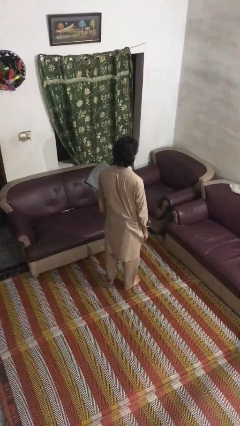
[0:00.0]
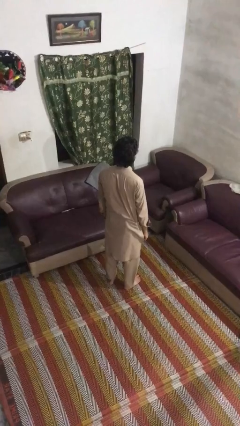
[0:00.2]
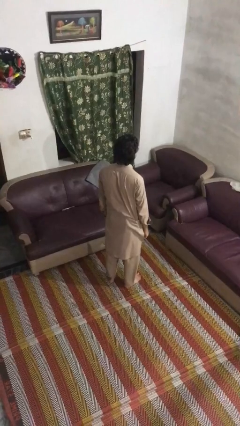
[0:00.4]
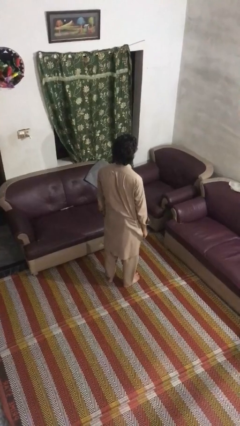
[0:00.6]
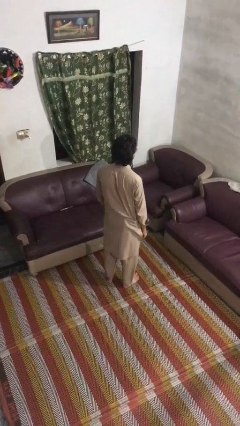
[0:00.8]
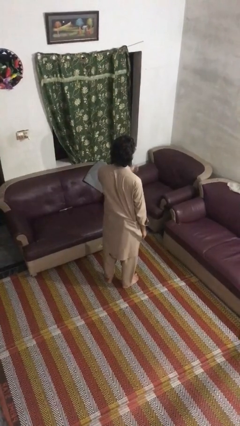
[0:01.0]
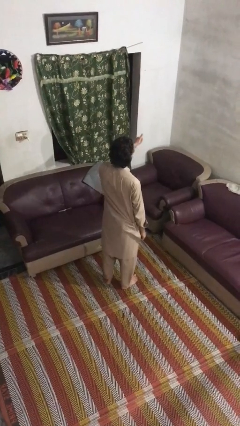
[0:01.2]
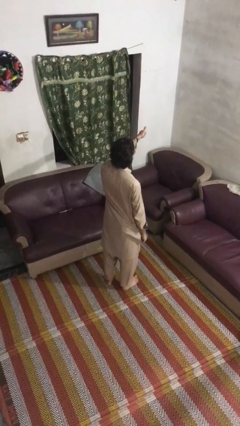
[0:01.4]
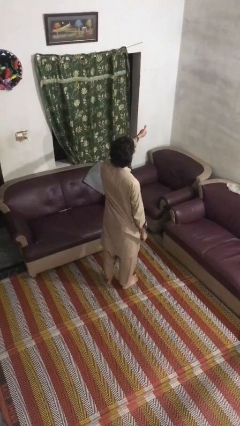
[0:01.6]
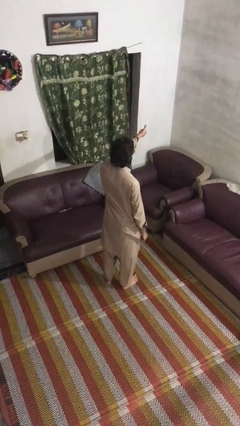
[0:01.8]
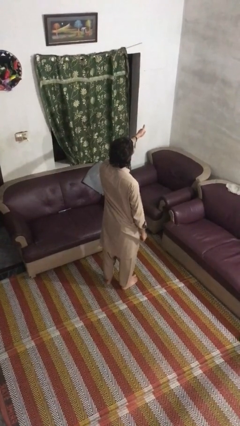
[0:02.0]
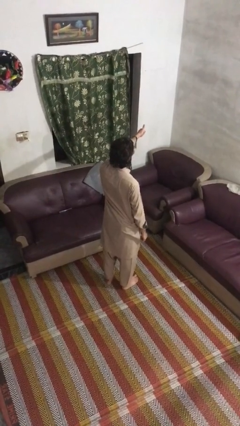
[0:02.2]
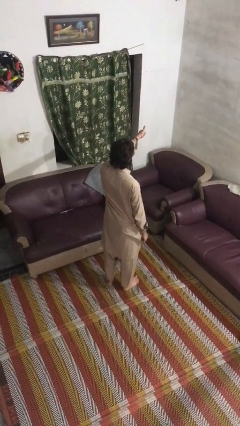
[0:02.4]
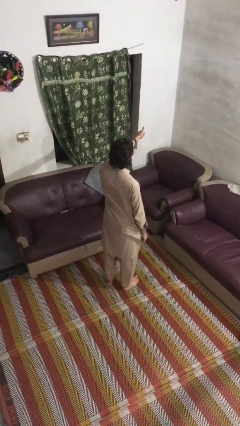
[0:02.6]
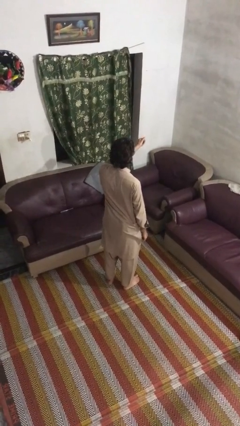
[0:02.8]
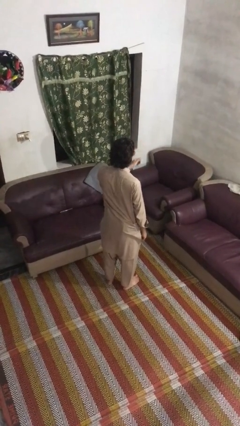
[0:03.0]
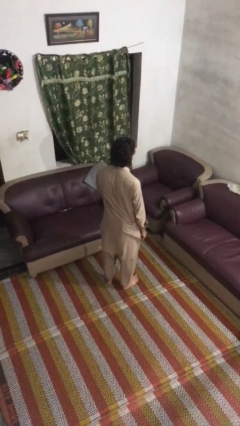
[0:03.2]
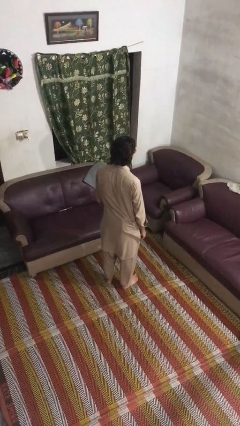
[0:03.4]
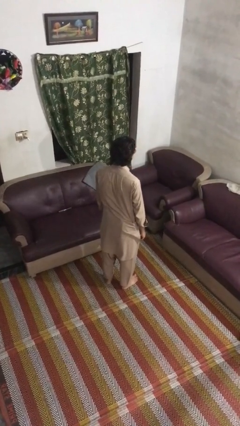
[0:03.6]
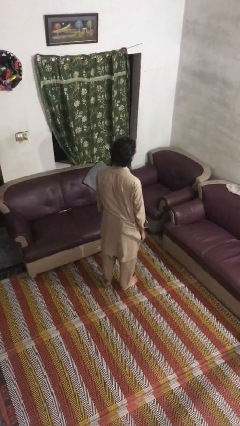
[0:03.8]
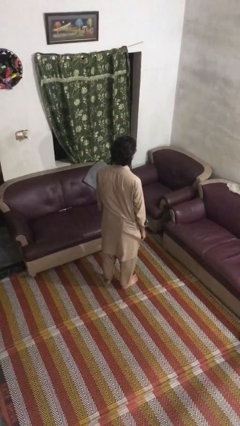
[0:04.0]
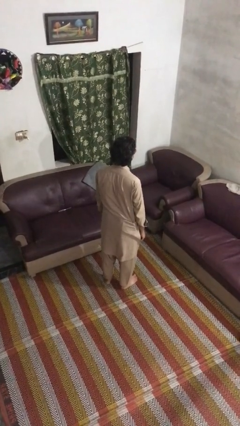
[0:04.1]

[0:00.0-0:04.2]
person gestures thumbs up

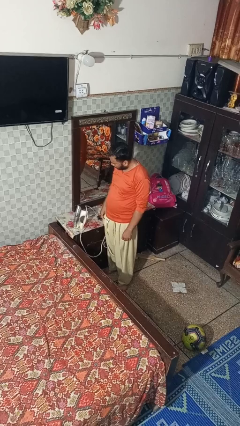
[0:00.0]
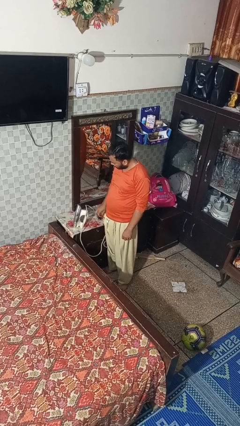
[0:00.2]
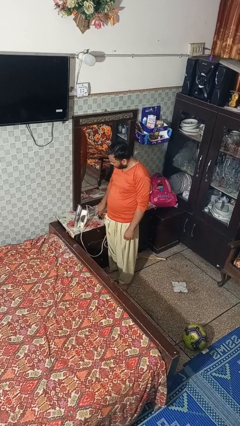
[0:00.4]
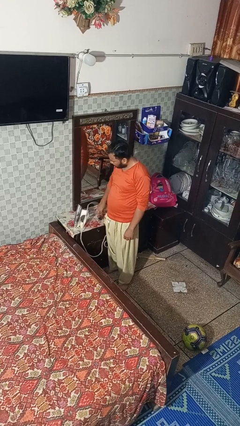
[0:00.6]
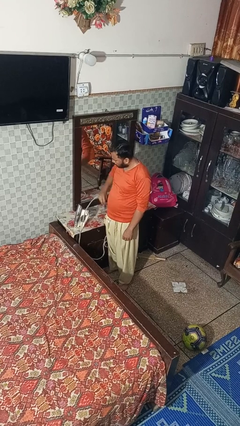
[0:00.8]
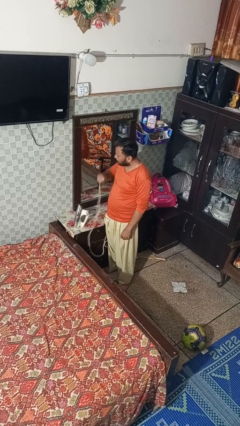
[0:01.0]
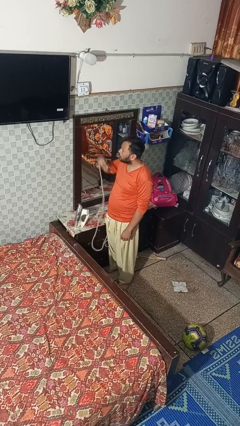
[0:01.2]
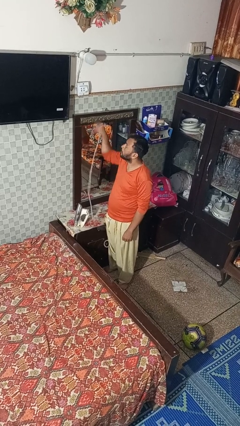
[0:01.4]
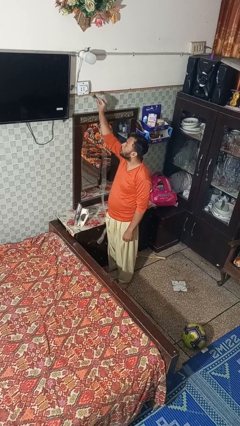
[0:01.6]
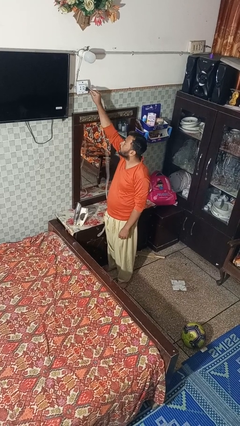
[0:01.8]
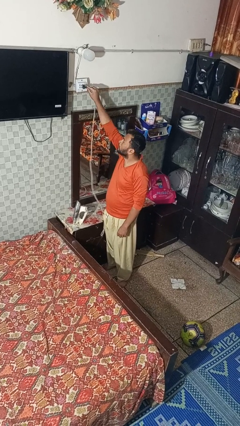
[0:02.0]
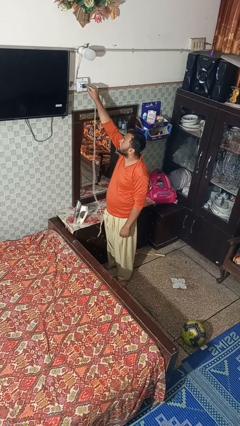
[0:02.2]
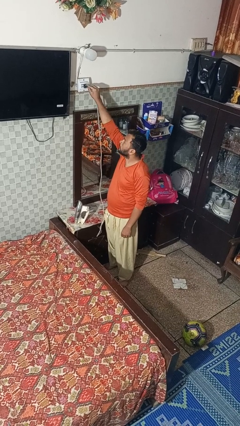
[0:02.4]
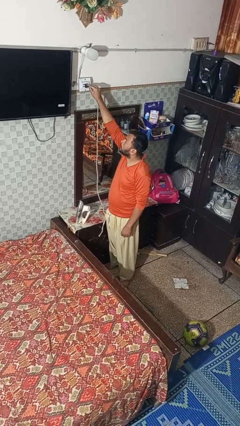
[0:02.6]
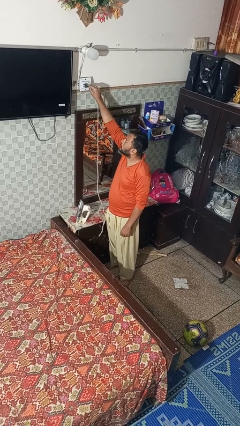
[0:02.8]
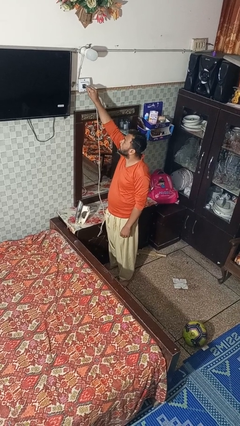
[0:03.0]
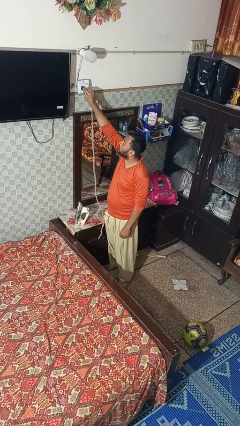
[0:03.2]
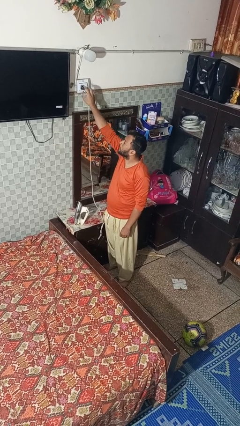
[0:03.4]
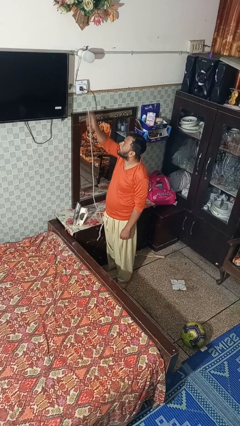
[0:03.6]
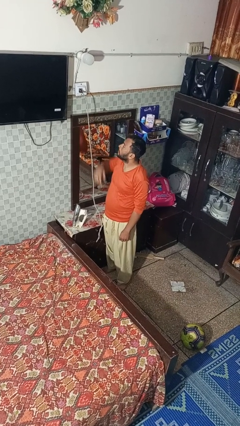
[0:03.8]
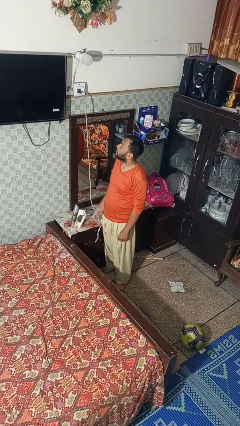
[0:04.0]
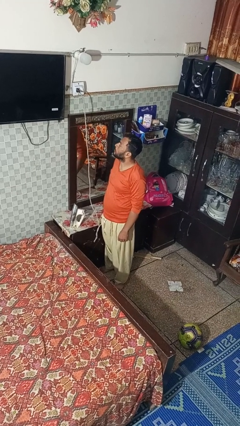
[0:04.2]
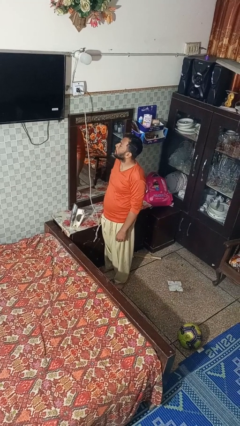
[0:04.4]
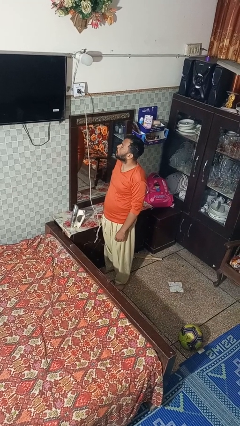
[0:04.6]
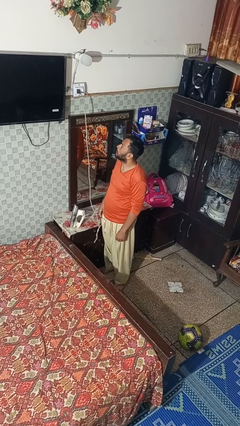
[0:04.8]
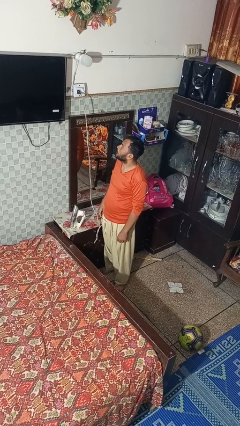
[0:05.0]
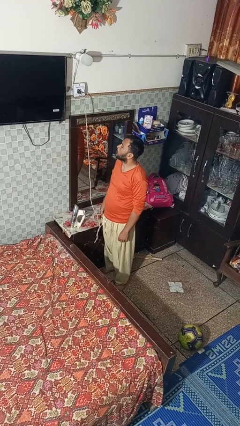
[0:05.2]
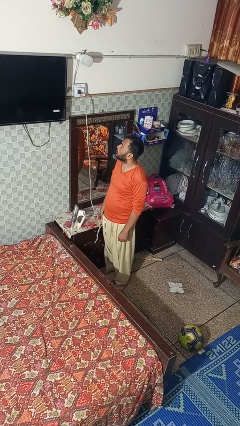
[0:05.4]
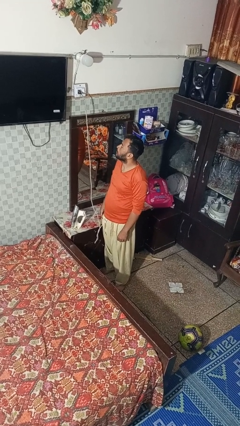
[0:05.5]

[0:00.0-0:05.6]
person plugs into electrical socket

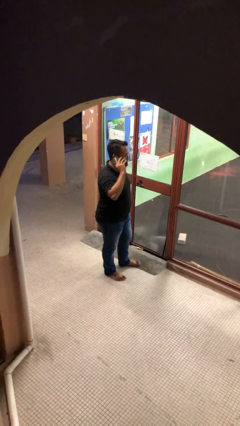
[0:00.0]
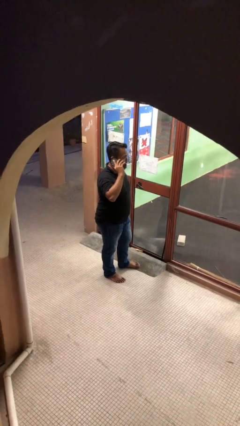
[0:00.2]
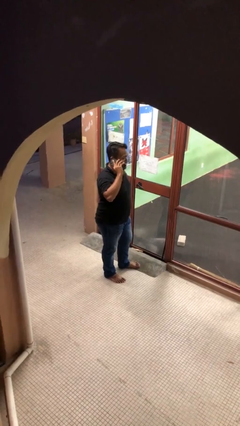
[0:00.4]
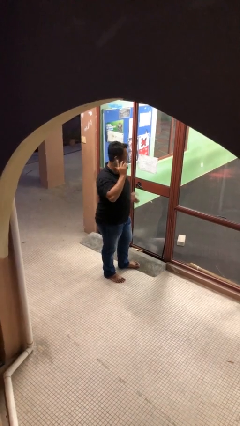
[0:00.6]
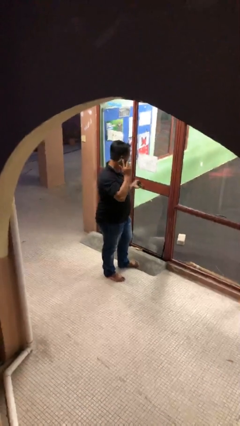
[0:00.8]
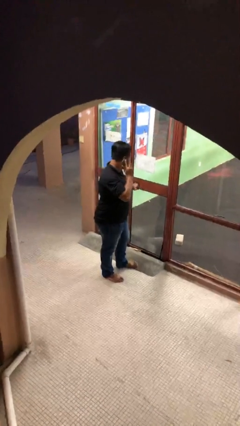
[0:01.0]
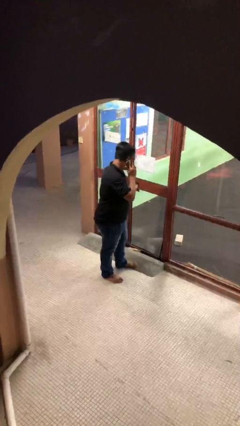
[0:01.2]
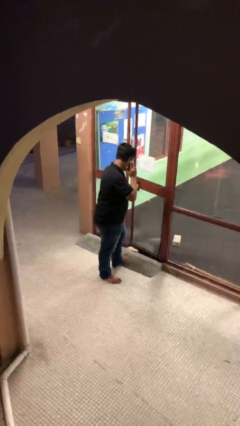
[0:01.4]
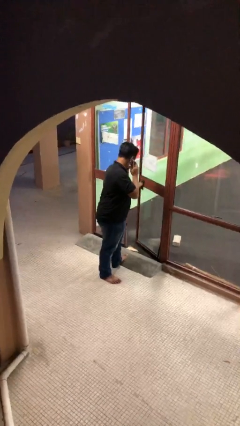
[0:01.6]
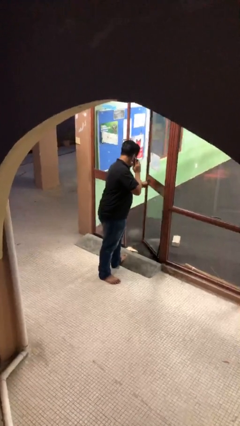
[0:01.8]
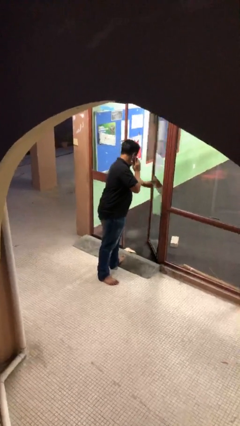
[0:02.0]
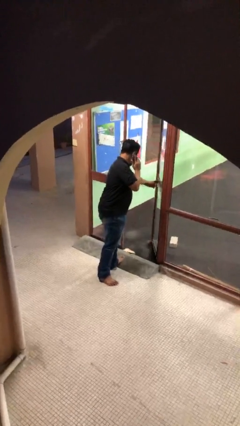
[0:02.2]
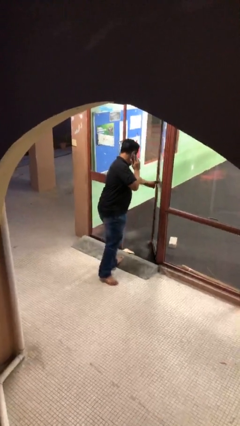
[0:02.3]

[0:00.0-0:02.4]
person opens facility door

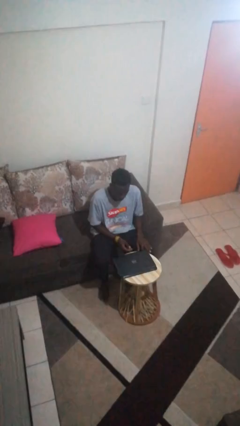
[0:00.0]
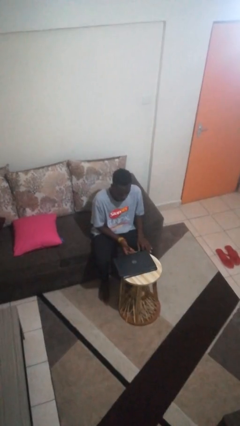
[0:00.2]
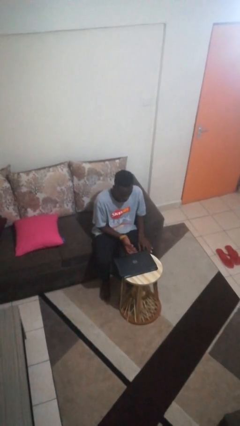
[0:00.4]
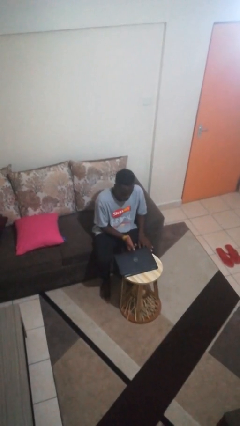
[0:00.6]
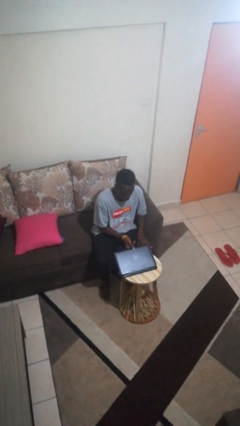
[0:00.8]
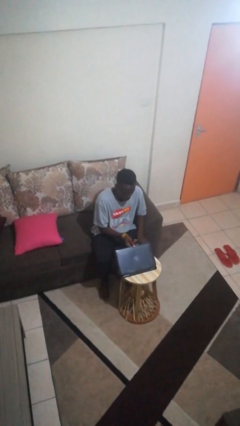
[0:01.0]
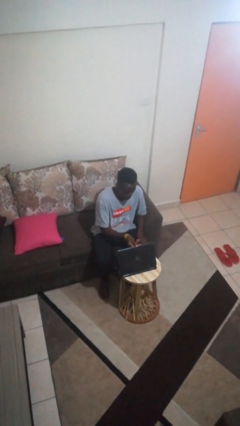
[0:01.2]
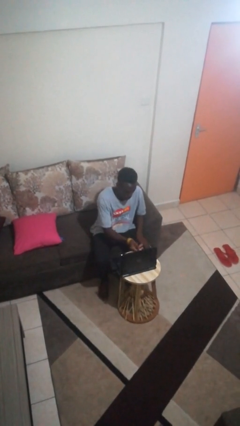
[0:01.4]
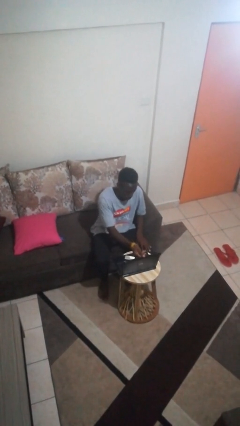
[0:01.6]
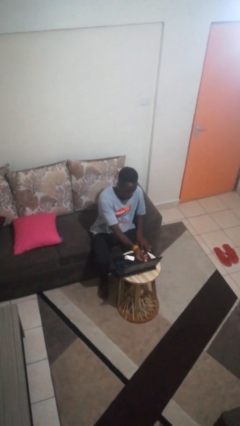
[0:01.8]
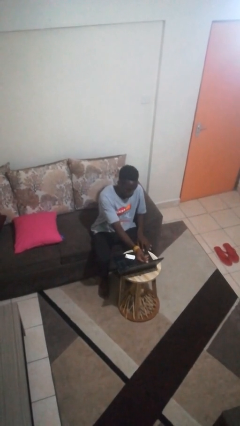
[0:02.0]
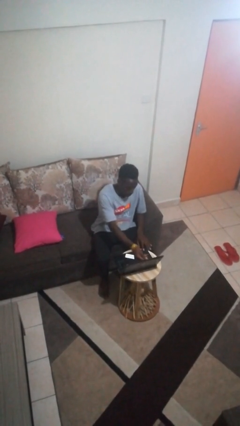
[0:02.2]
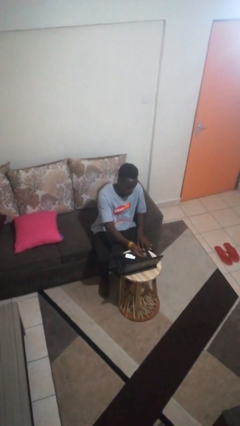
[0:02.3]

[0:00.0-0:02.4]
person opens laptop

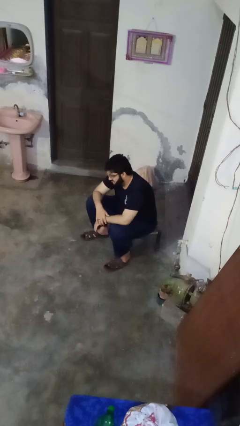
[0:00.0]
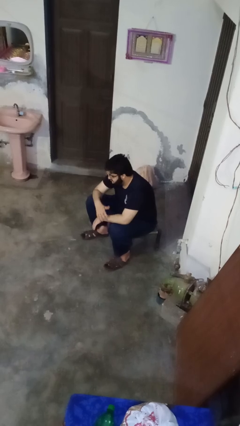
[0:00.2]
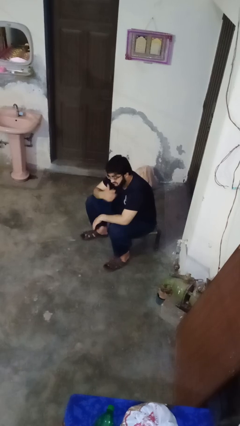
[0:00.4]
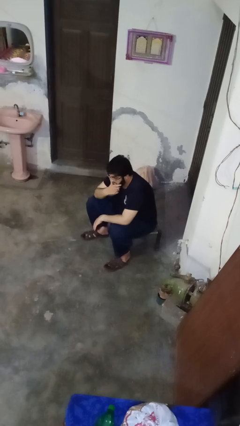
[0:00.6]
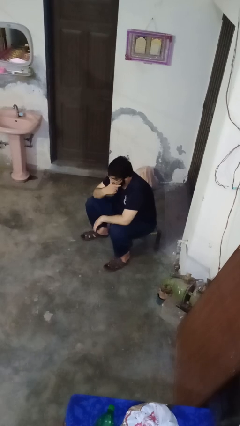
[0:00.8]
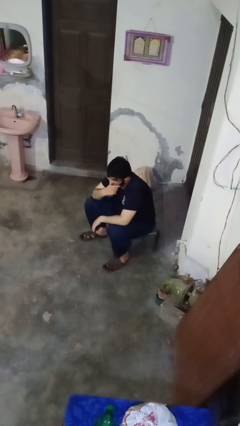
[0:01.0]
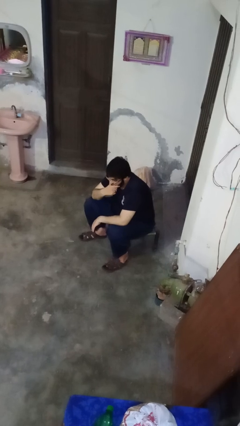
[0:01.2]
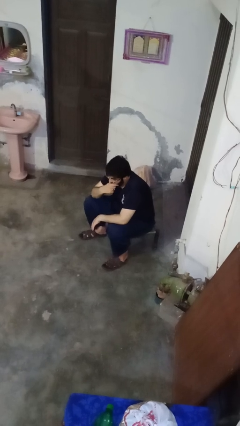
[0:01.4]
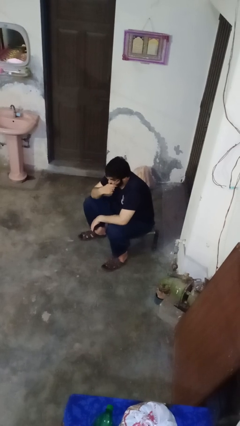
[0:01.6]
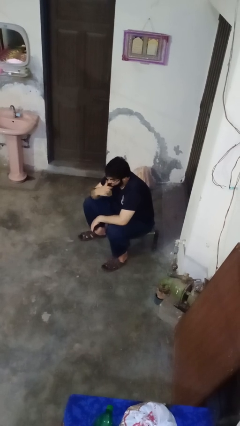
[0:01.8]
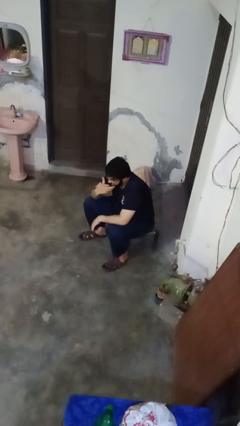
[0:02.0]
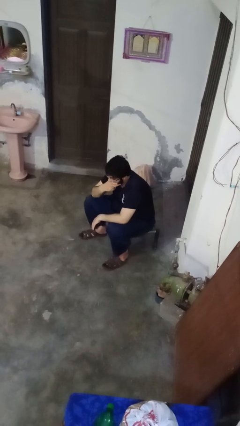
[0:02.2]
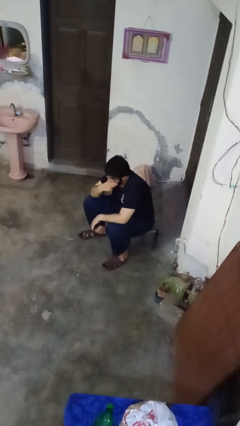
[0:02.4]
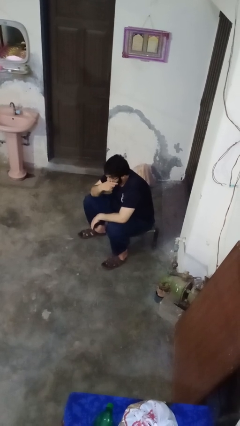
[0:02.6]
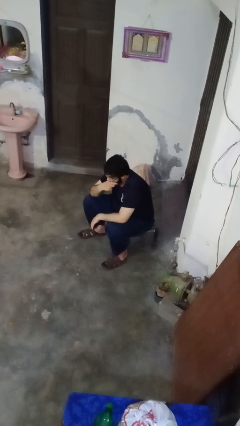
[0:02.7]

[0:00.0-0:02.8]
person strokes chin
